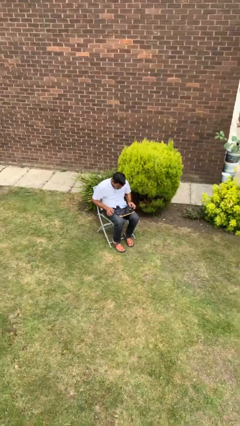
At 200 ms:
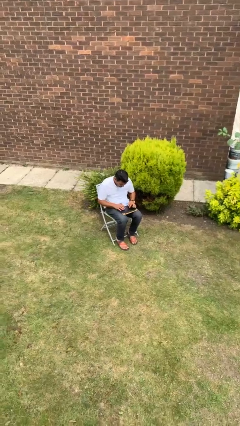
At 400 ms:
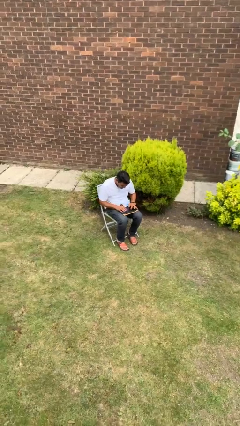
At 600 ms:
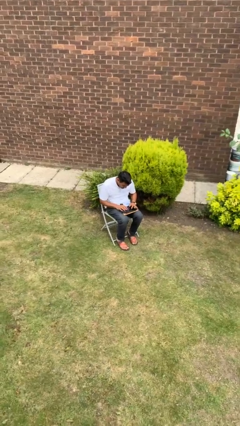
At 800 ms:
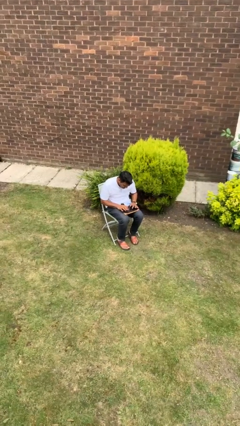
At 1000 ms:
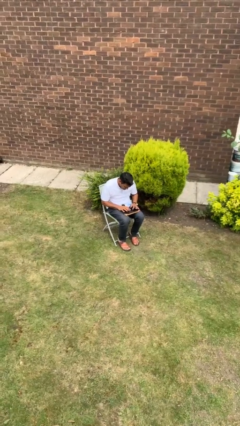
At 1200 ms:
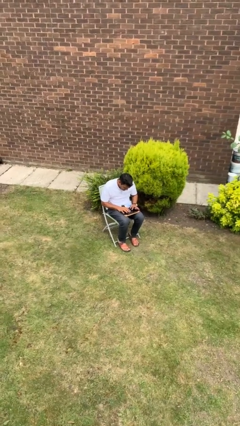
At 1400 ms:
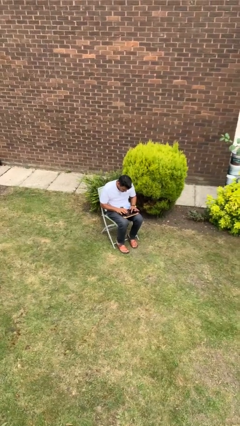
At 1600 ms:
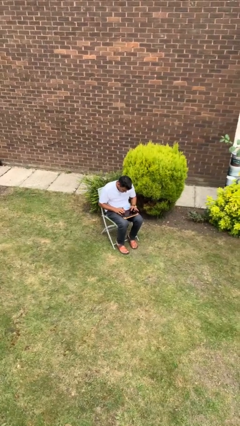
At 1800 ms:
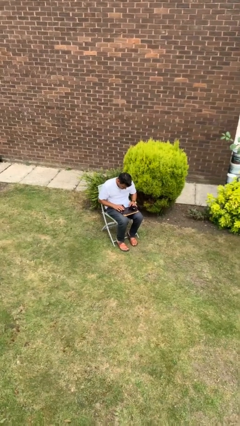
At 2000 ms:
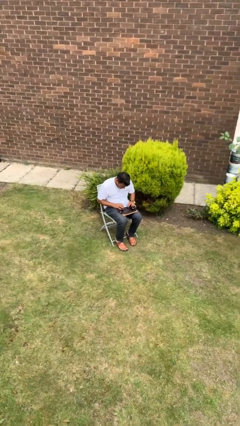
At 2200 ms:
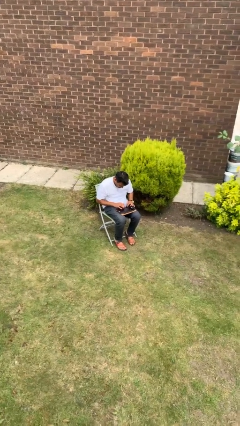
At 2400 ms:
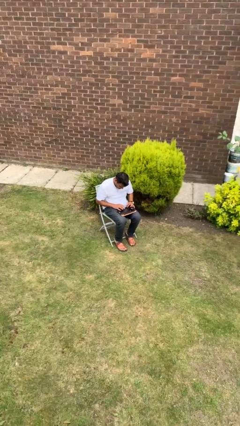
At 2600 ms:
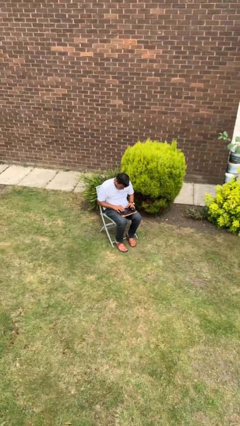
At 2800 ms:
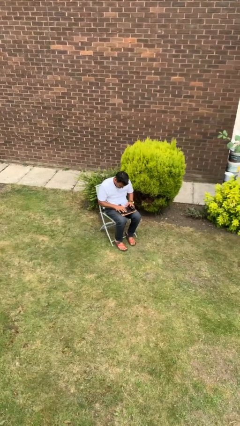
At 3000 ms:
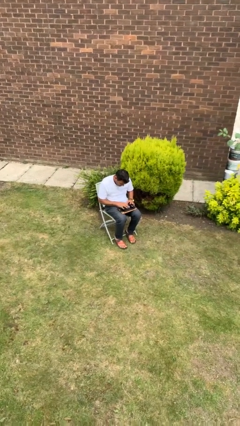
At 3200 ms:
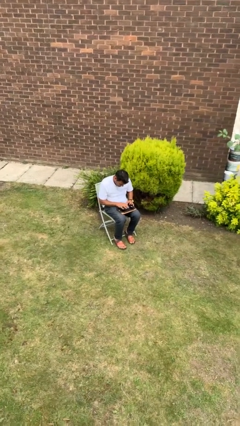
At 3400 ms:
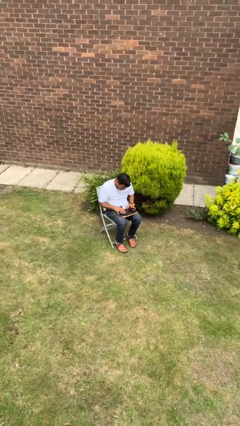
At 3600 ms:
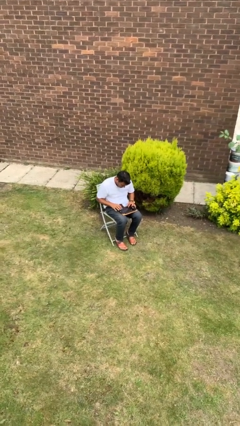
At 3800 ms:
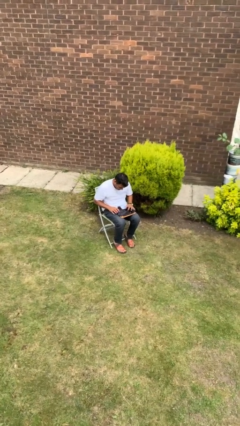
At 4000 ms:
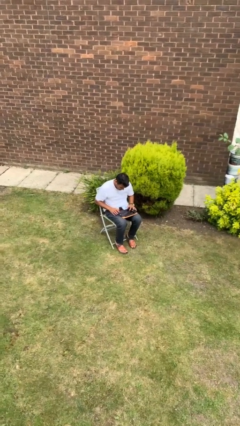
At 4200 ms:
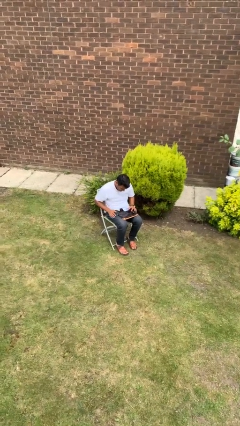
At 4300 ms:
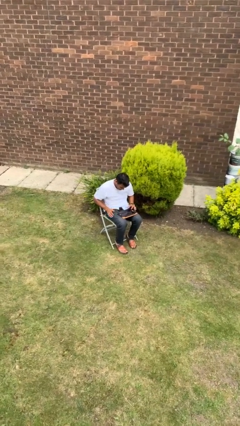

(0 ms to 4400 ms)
person interacts with tablet

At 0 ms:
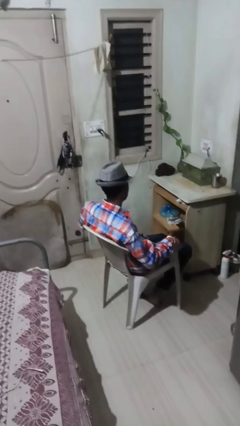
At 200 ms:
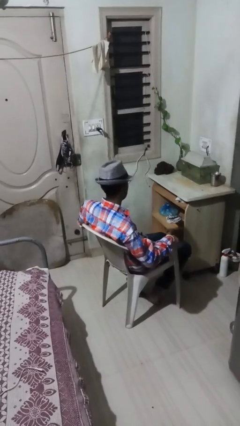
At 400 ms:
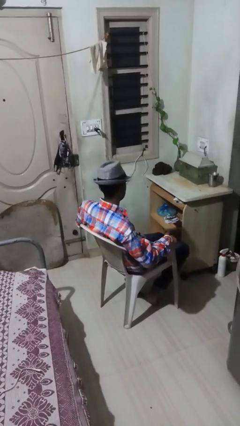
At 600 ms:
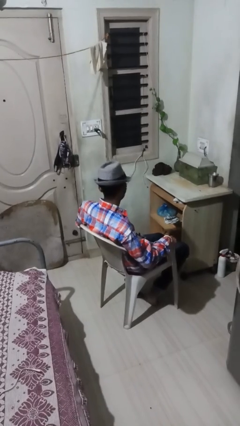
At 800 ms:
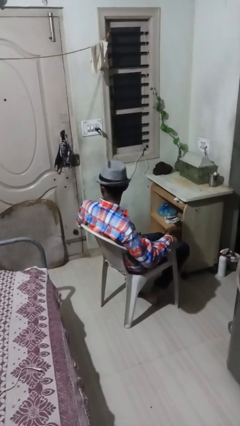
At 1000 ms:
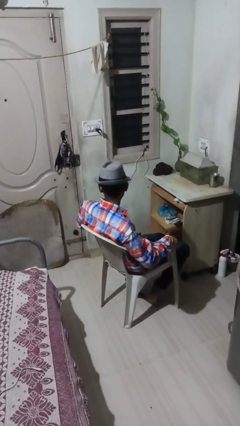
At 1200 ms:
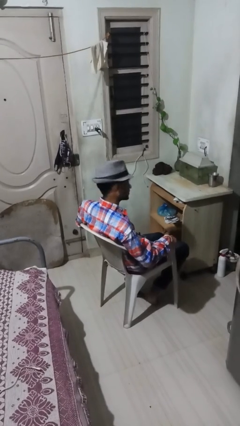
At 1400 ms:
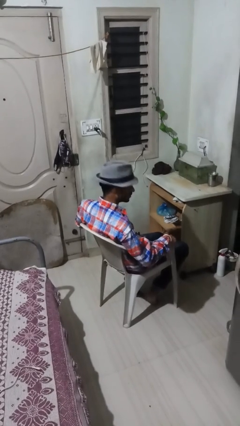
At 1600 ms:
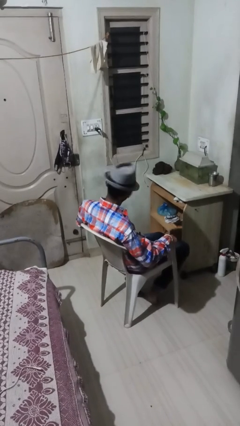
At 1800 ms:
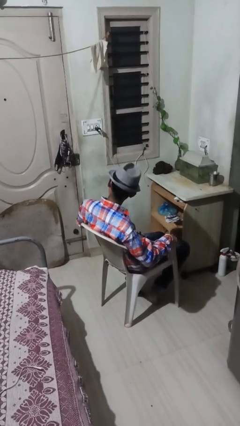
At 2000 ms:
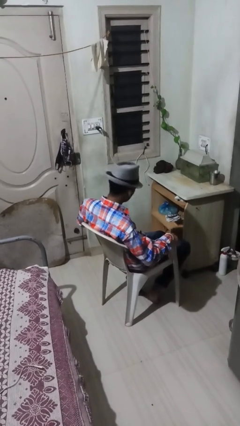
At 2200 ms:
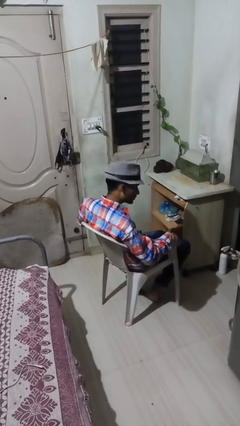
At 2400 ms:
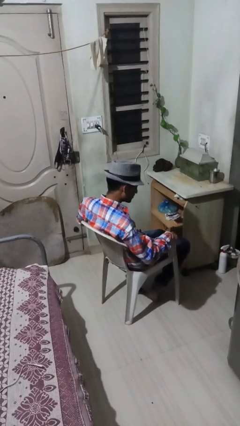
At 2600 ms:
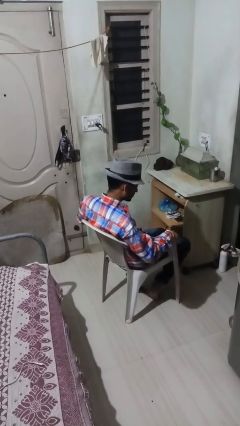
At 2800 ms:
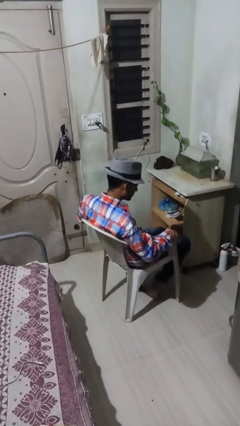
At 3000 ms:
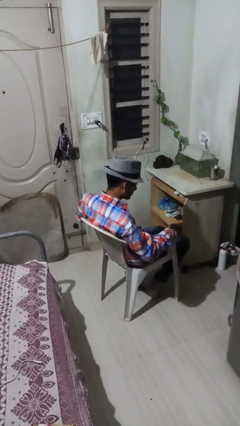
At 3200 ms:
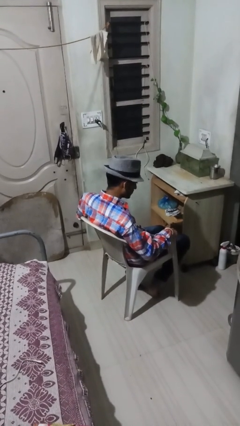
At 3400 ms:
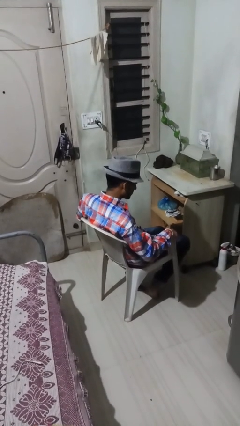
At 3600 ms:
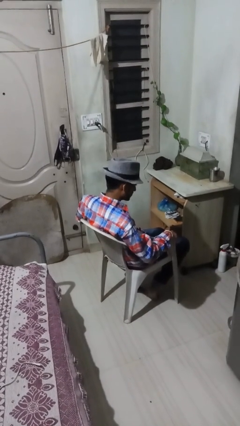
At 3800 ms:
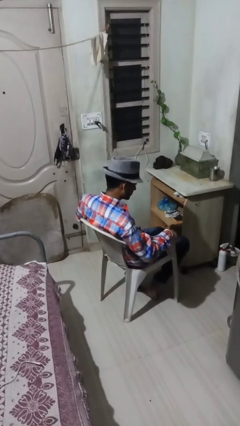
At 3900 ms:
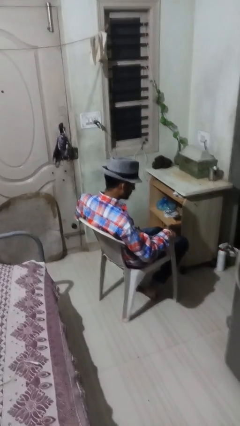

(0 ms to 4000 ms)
person shakes head

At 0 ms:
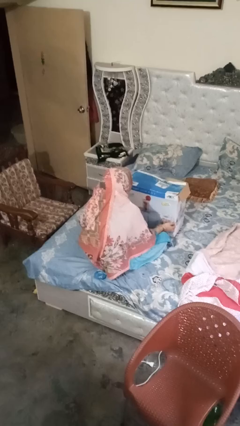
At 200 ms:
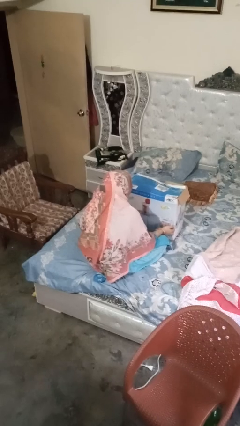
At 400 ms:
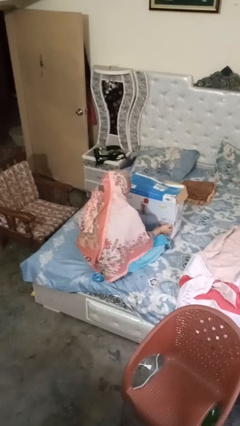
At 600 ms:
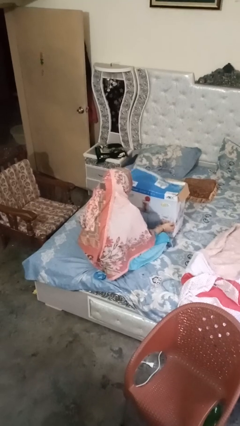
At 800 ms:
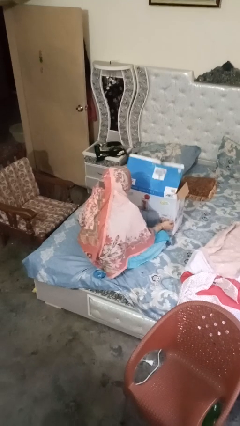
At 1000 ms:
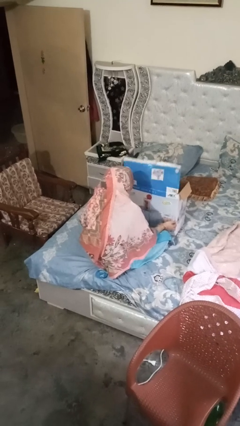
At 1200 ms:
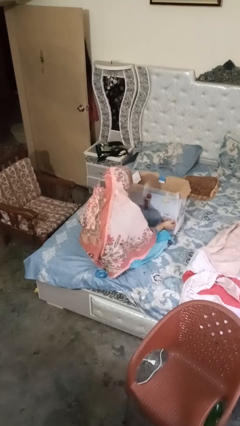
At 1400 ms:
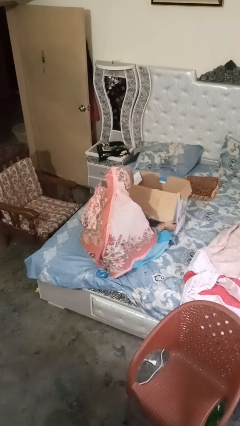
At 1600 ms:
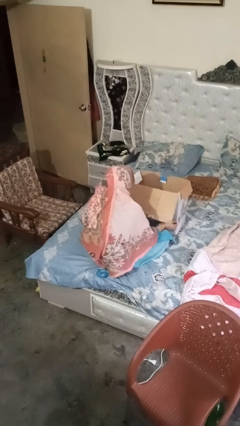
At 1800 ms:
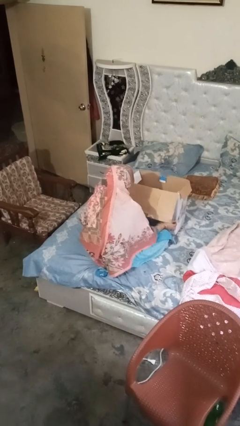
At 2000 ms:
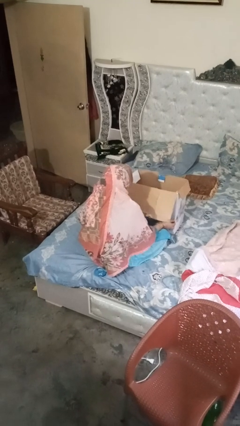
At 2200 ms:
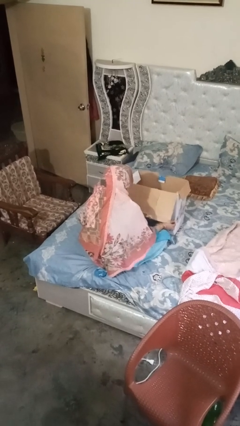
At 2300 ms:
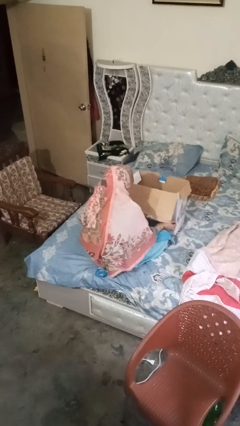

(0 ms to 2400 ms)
person opens box

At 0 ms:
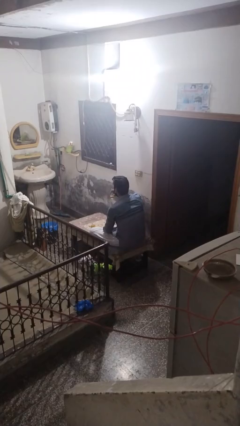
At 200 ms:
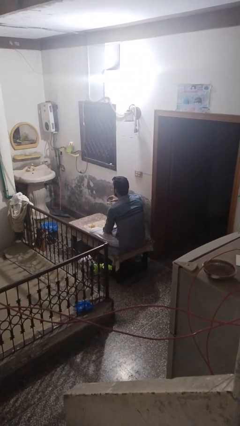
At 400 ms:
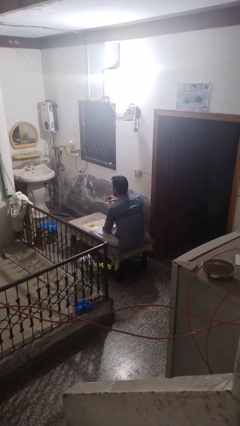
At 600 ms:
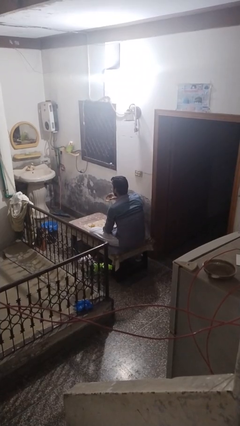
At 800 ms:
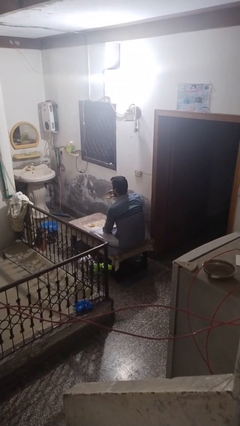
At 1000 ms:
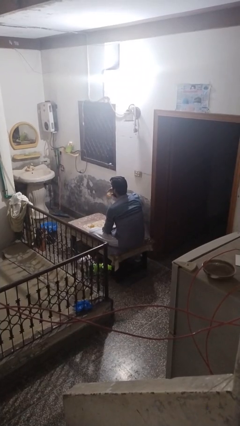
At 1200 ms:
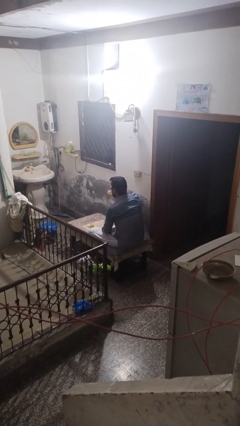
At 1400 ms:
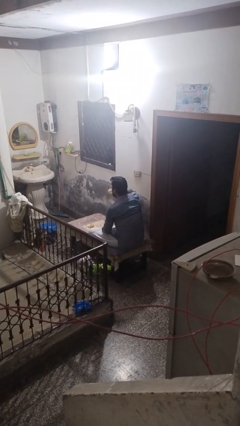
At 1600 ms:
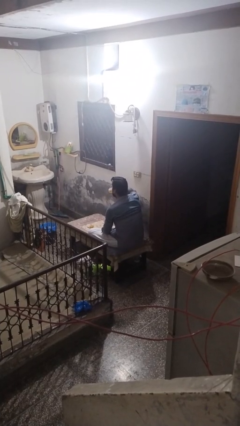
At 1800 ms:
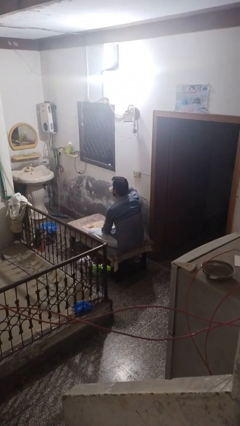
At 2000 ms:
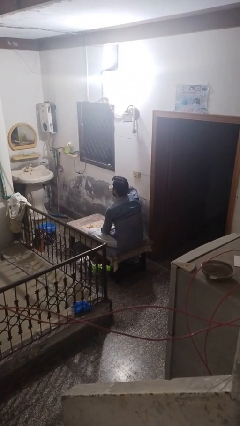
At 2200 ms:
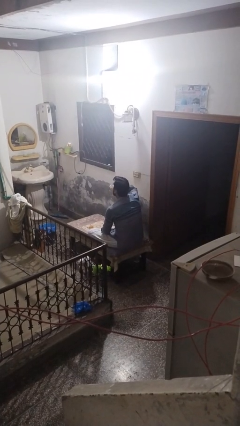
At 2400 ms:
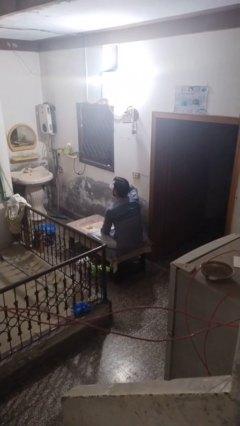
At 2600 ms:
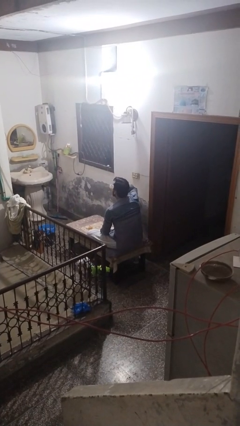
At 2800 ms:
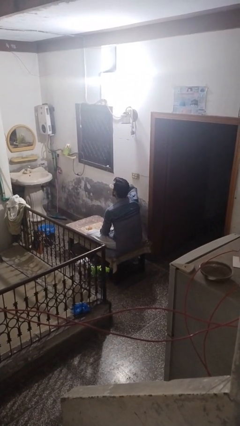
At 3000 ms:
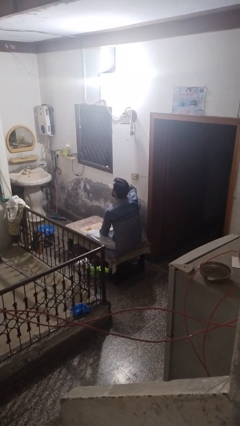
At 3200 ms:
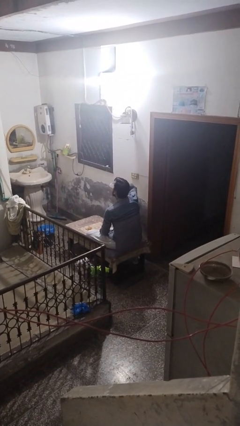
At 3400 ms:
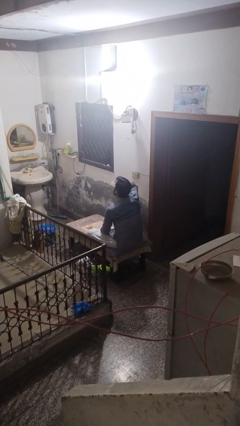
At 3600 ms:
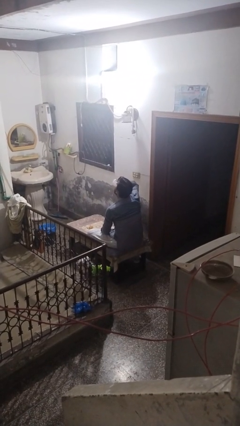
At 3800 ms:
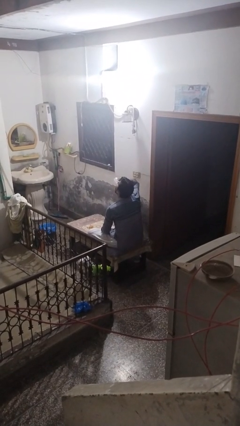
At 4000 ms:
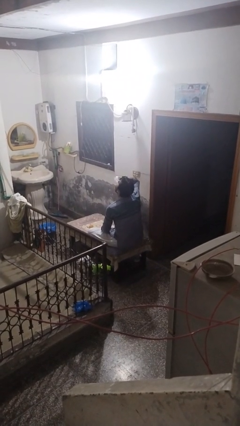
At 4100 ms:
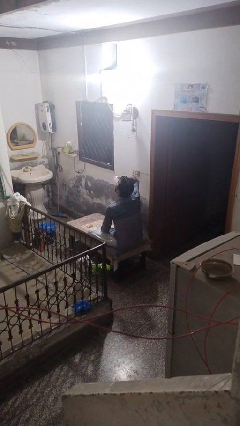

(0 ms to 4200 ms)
person drinks from shotglass

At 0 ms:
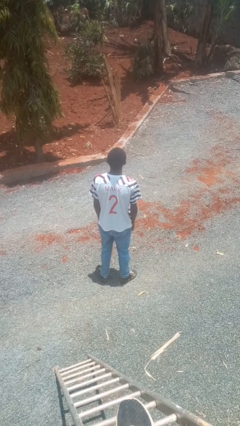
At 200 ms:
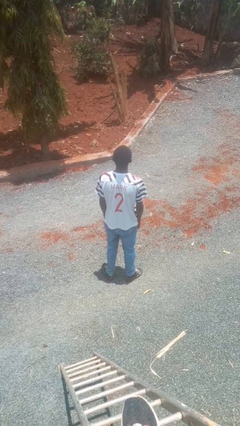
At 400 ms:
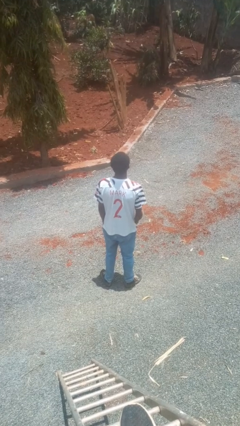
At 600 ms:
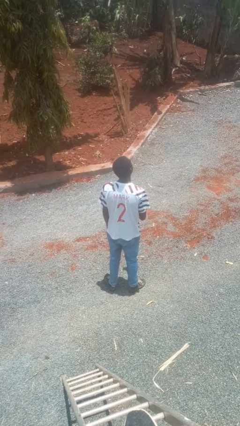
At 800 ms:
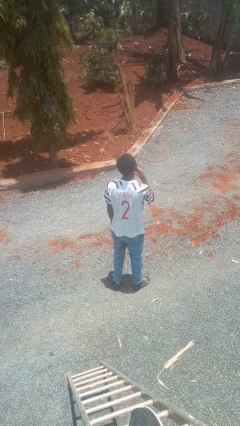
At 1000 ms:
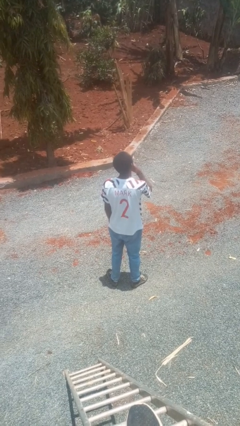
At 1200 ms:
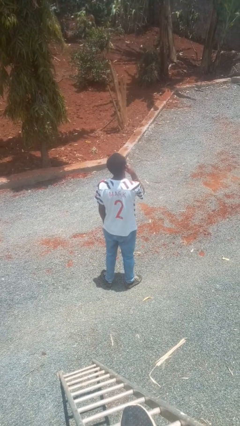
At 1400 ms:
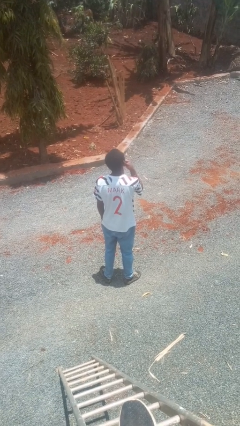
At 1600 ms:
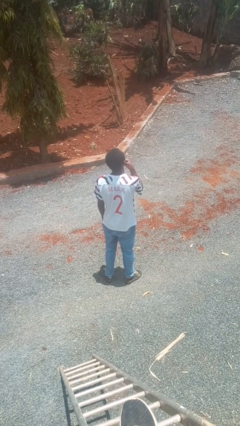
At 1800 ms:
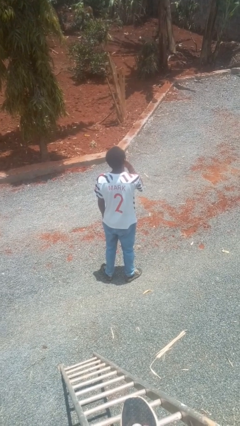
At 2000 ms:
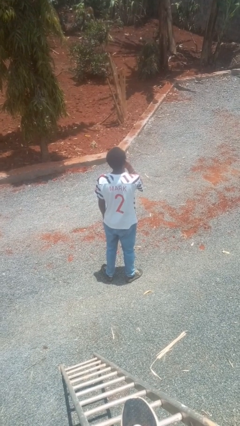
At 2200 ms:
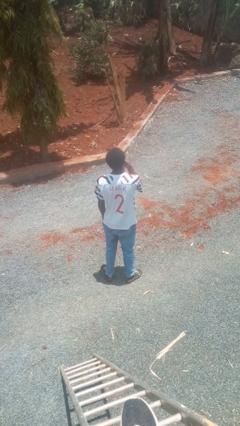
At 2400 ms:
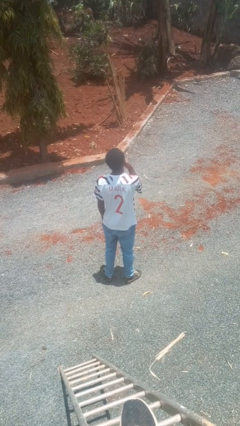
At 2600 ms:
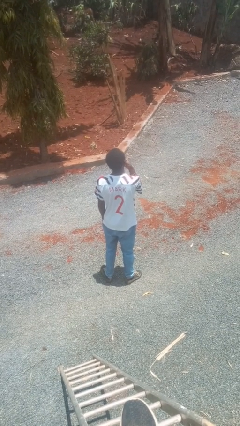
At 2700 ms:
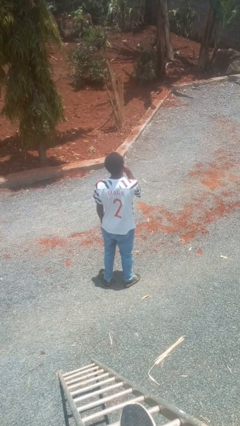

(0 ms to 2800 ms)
person strokes chin
